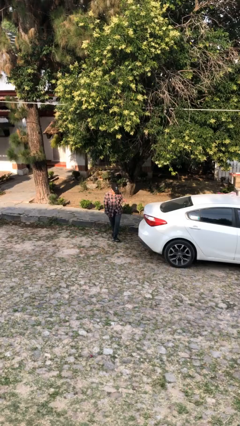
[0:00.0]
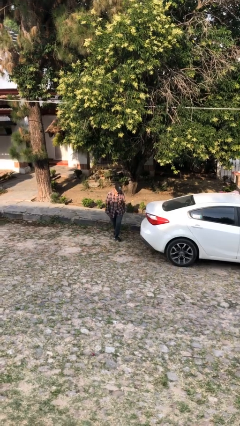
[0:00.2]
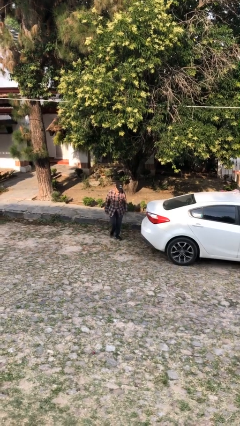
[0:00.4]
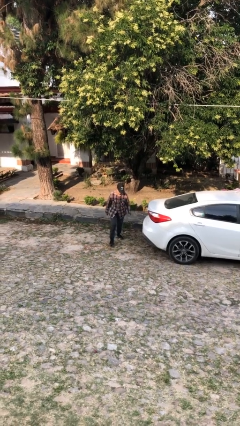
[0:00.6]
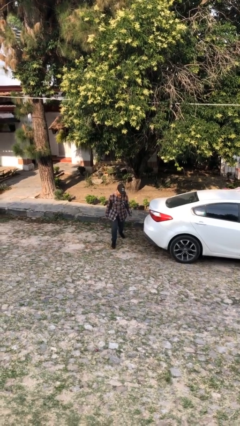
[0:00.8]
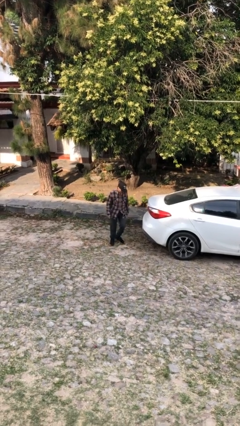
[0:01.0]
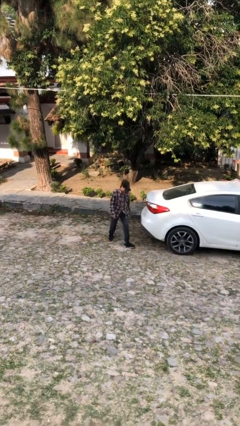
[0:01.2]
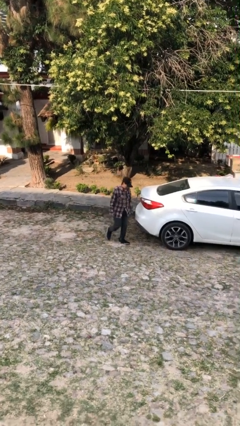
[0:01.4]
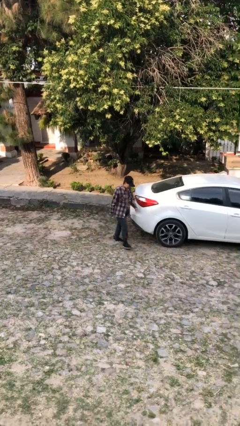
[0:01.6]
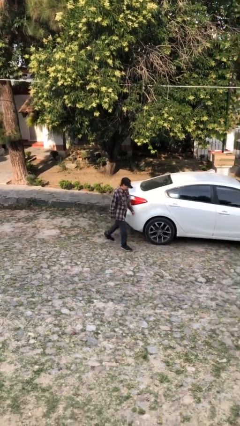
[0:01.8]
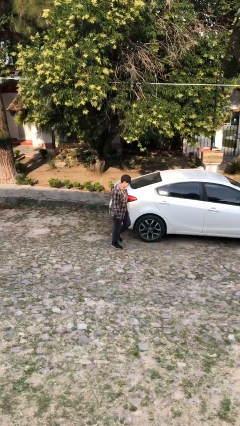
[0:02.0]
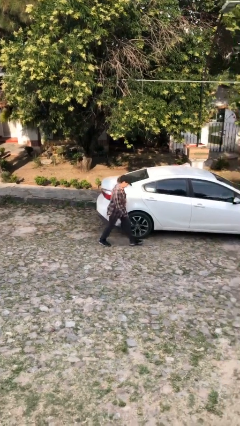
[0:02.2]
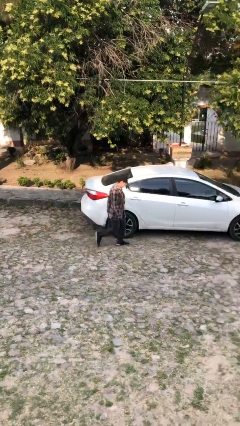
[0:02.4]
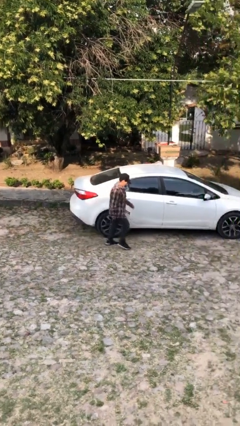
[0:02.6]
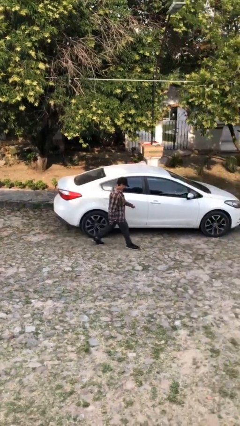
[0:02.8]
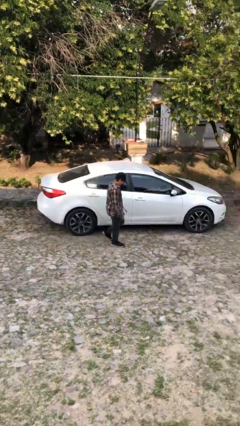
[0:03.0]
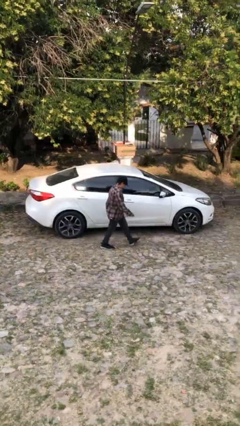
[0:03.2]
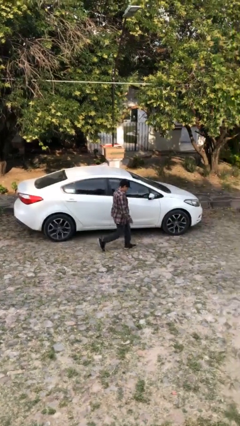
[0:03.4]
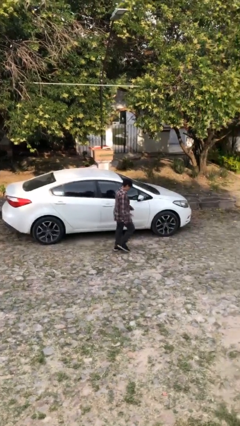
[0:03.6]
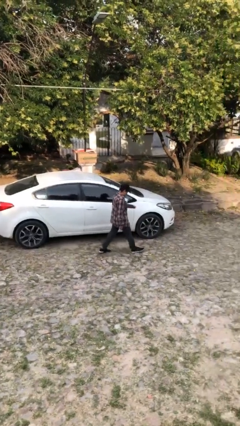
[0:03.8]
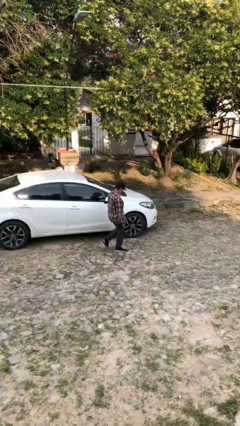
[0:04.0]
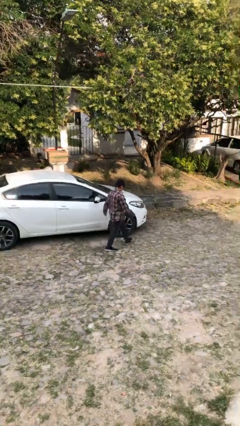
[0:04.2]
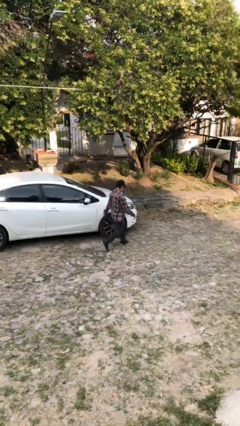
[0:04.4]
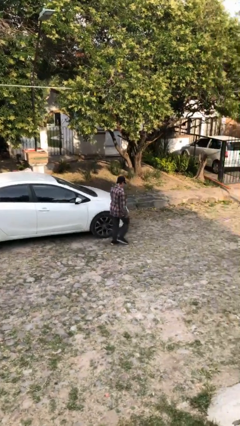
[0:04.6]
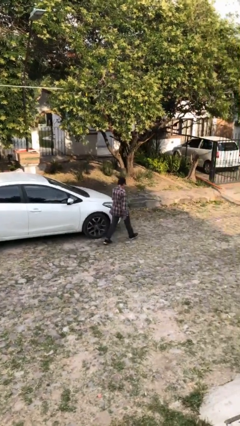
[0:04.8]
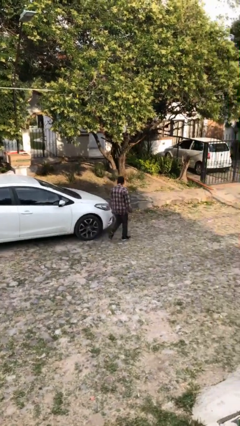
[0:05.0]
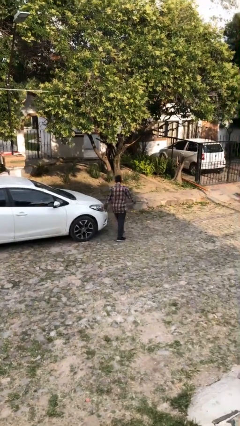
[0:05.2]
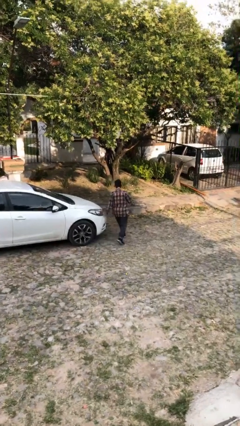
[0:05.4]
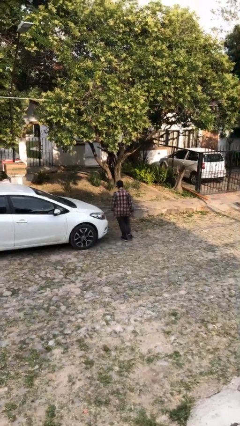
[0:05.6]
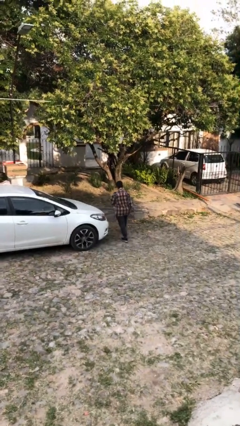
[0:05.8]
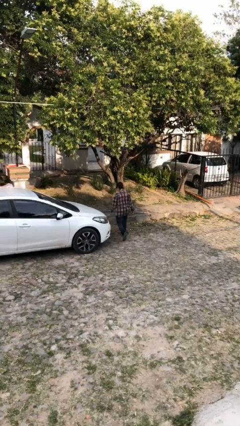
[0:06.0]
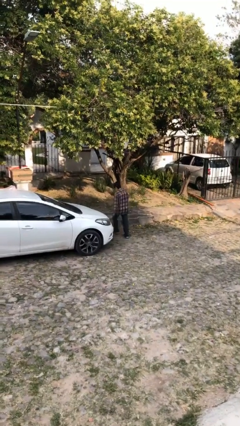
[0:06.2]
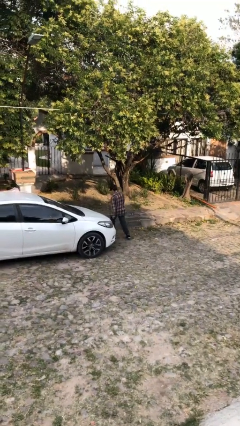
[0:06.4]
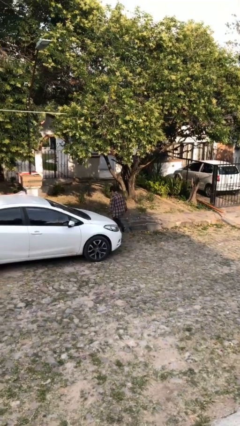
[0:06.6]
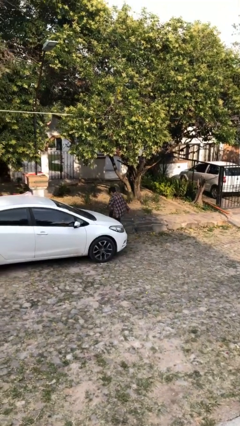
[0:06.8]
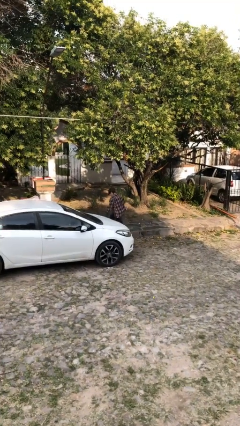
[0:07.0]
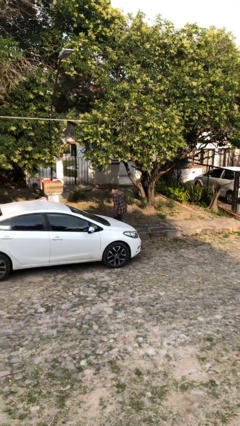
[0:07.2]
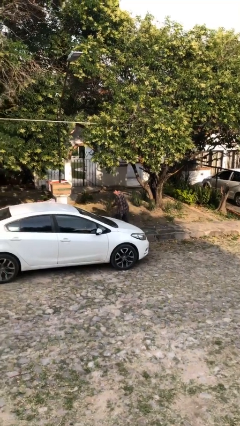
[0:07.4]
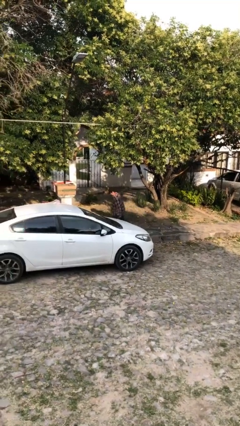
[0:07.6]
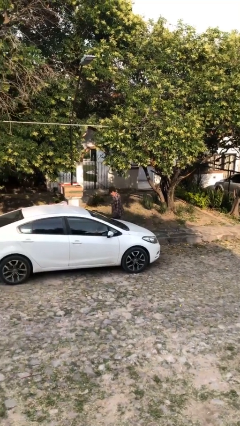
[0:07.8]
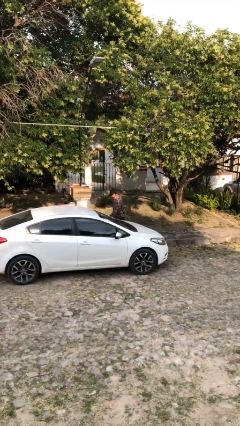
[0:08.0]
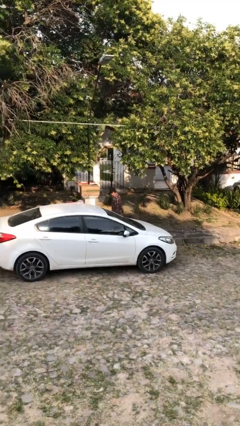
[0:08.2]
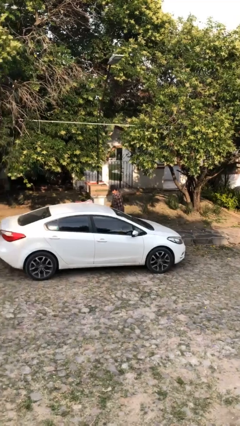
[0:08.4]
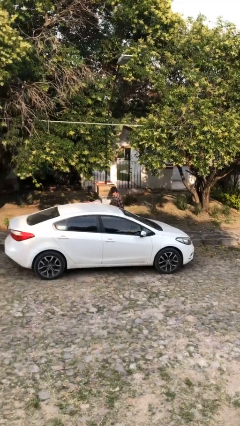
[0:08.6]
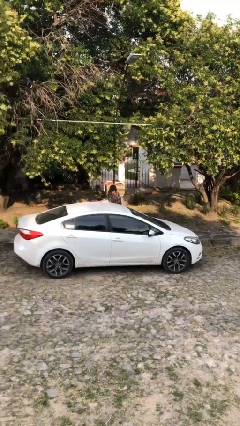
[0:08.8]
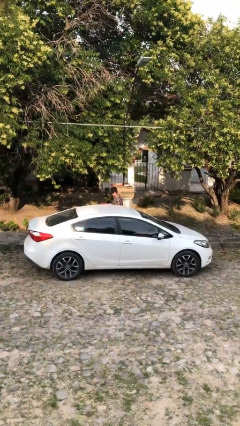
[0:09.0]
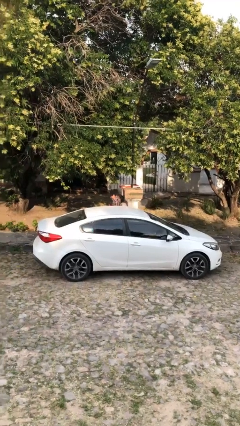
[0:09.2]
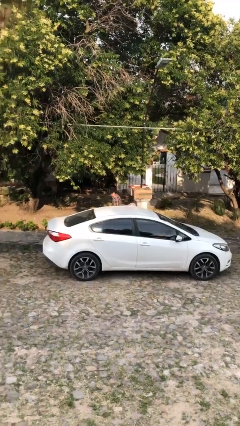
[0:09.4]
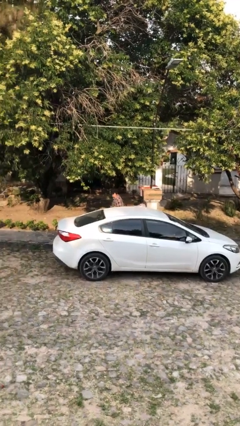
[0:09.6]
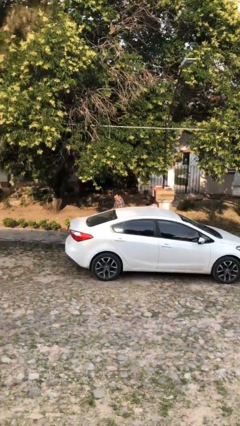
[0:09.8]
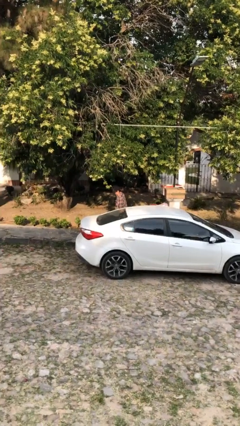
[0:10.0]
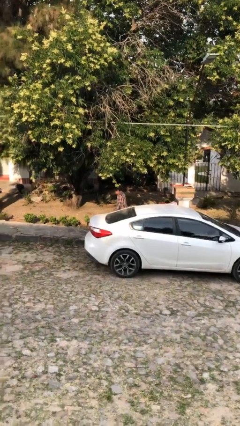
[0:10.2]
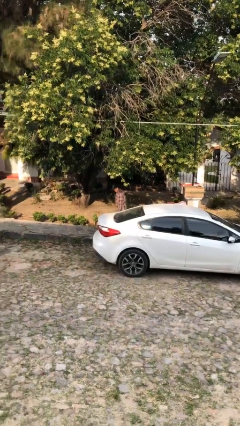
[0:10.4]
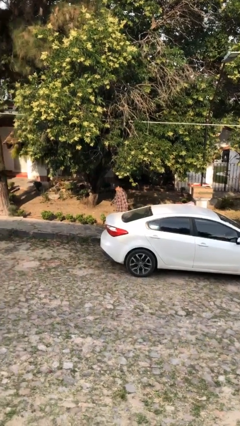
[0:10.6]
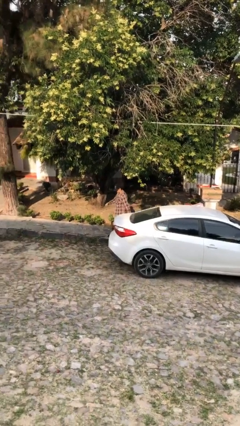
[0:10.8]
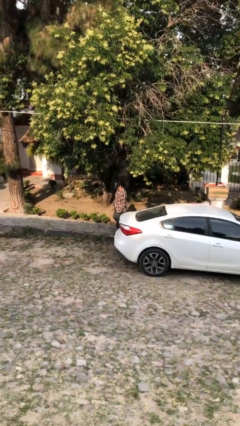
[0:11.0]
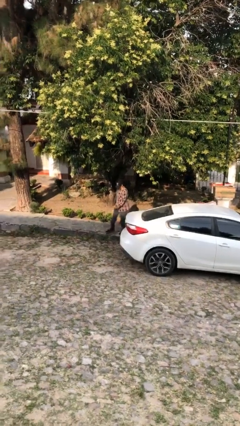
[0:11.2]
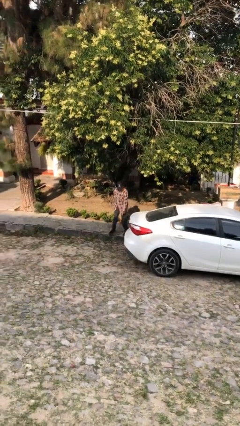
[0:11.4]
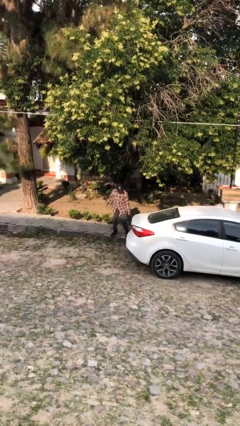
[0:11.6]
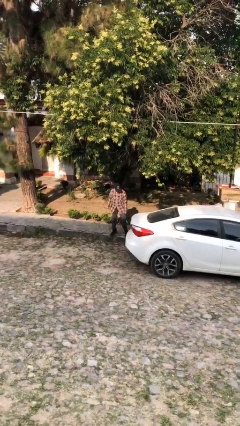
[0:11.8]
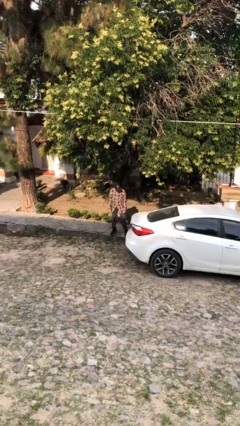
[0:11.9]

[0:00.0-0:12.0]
person walks around car

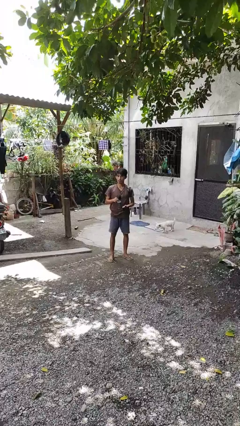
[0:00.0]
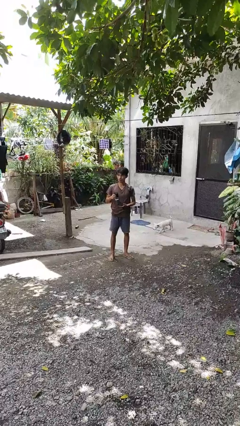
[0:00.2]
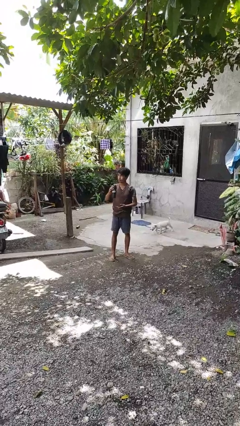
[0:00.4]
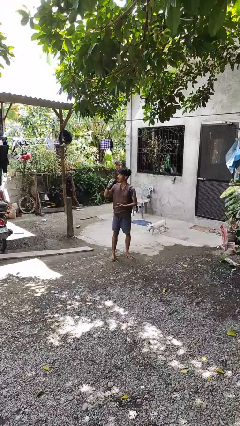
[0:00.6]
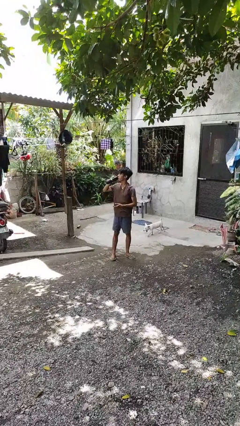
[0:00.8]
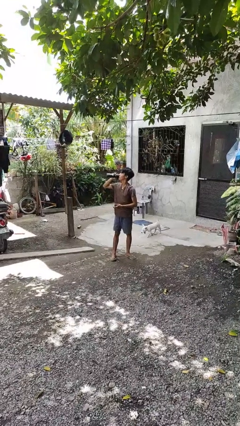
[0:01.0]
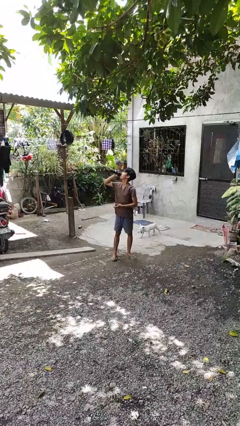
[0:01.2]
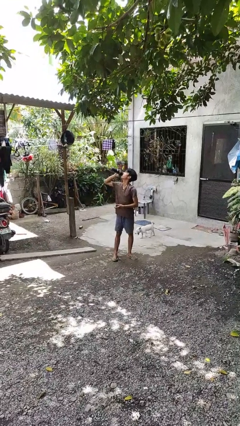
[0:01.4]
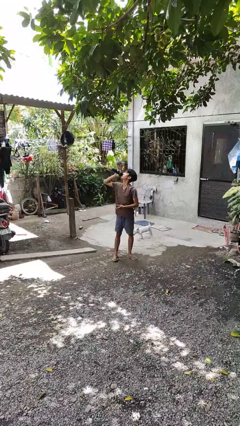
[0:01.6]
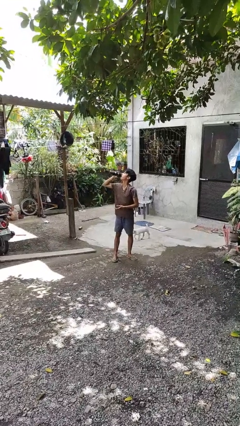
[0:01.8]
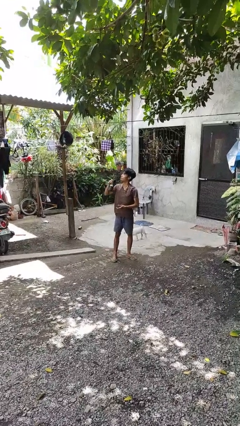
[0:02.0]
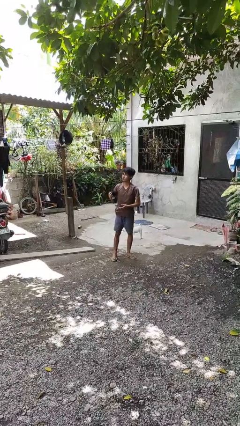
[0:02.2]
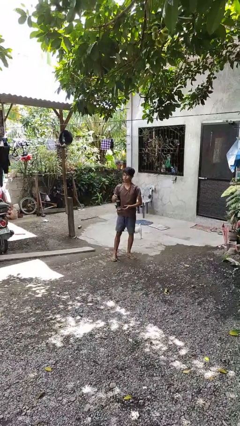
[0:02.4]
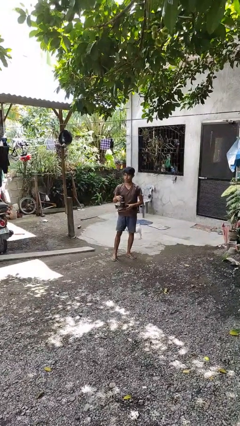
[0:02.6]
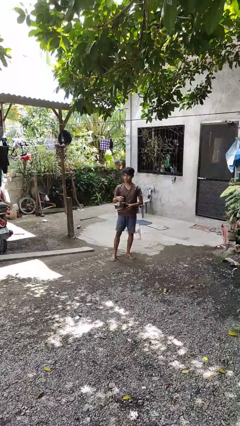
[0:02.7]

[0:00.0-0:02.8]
person drinks from bottle

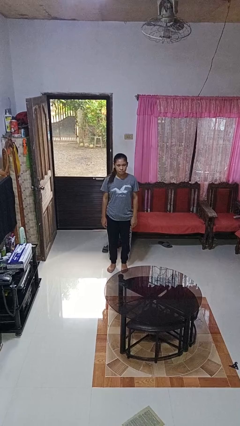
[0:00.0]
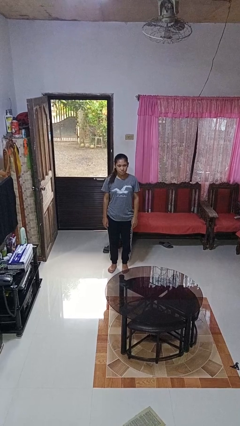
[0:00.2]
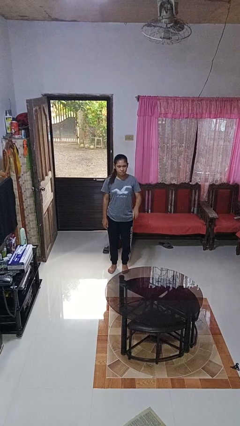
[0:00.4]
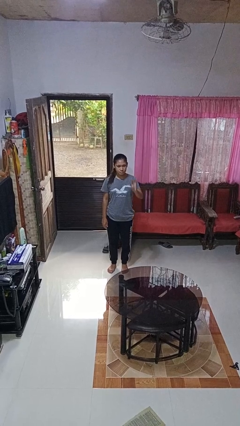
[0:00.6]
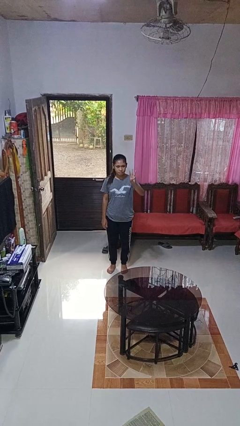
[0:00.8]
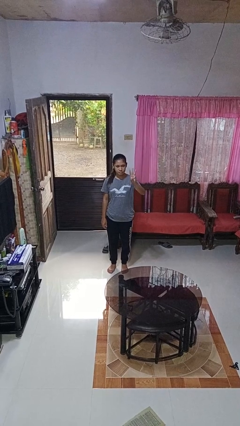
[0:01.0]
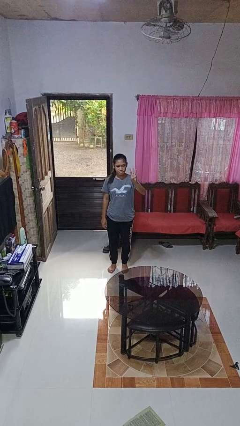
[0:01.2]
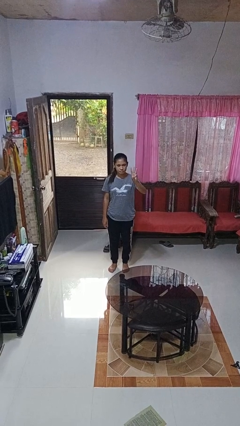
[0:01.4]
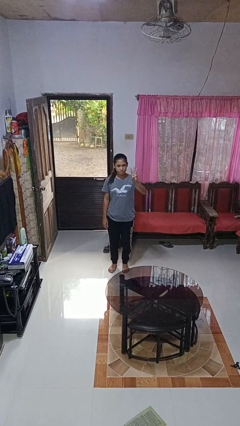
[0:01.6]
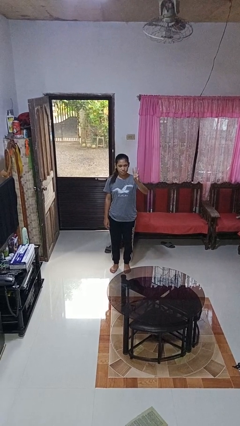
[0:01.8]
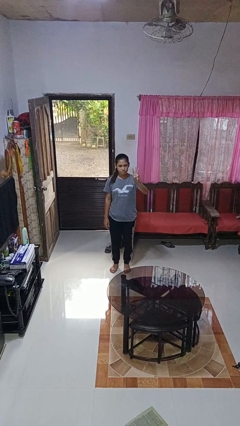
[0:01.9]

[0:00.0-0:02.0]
person gestures number three

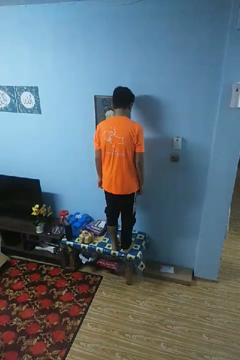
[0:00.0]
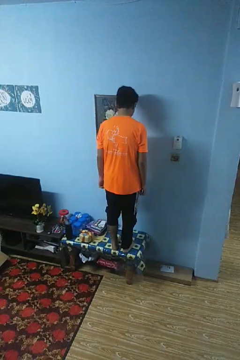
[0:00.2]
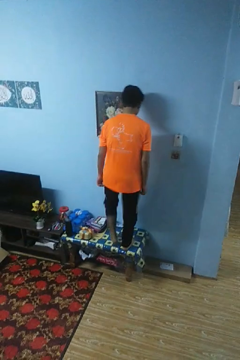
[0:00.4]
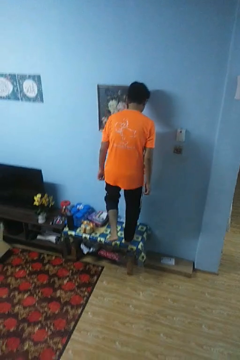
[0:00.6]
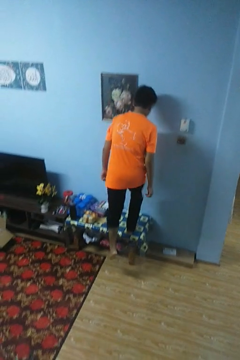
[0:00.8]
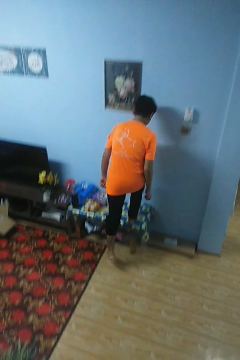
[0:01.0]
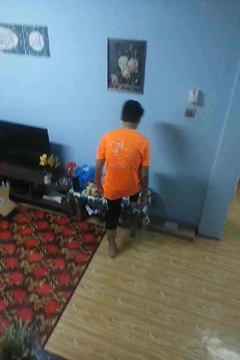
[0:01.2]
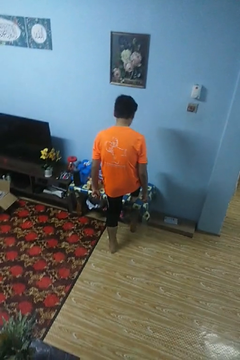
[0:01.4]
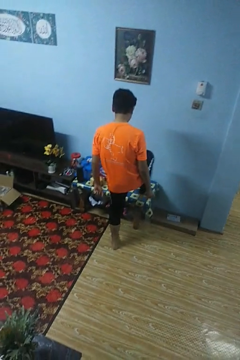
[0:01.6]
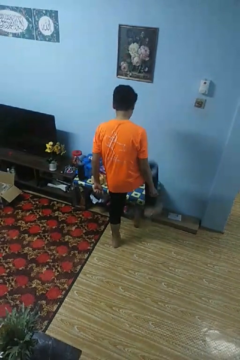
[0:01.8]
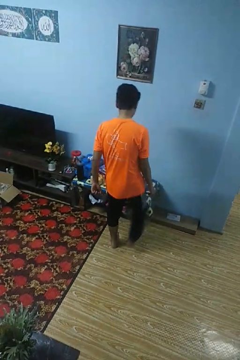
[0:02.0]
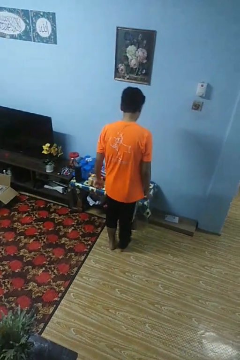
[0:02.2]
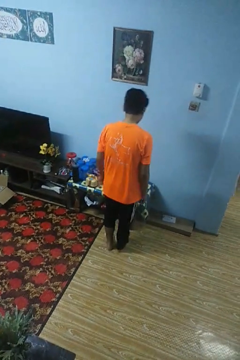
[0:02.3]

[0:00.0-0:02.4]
person climbs off table
